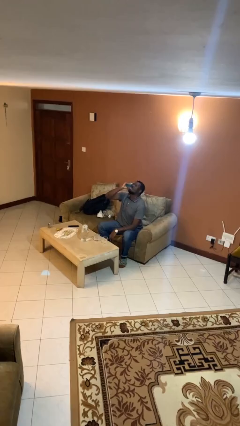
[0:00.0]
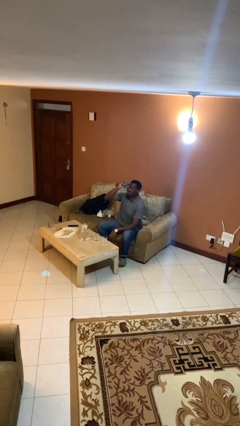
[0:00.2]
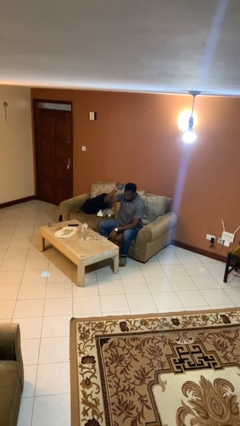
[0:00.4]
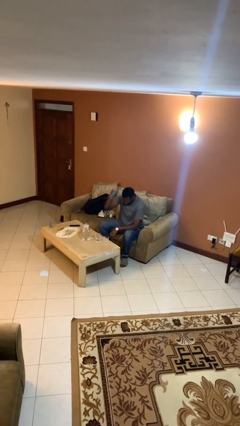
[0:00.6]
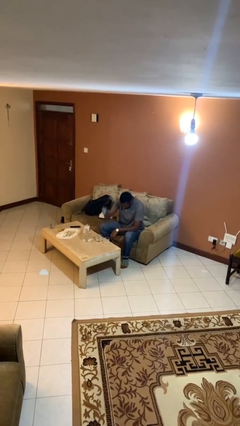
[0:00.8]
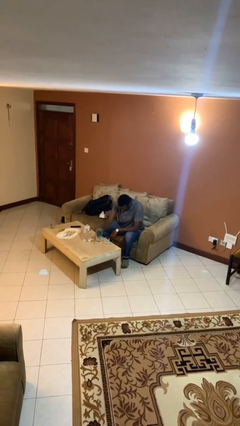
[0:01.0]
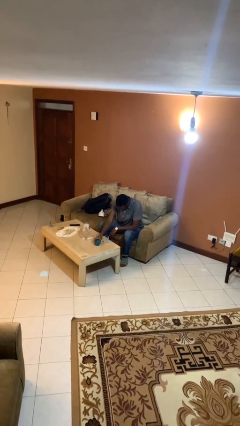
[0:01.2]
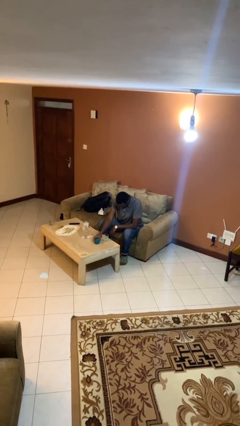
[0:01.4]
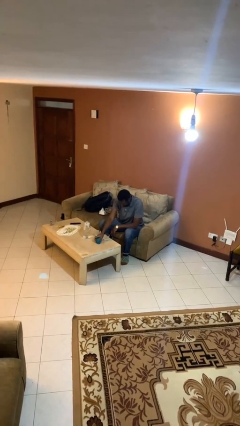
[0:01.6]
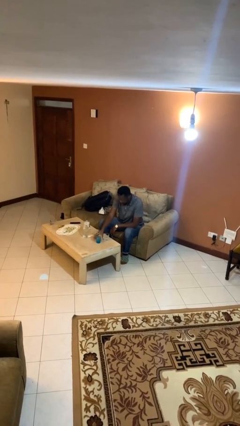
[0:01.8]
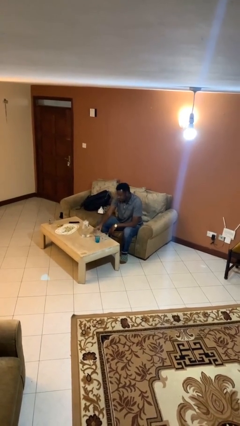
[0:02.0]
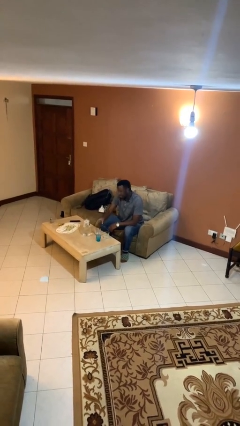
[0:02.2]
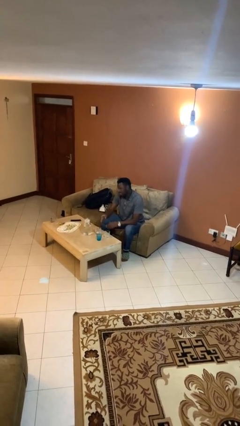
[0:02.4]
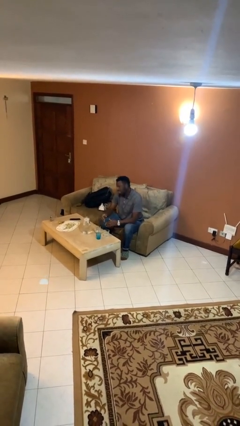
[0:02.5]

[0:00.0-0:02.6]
person puts down object on table

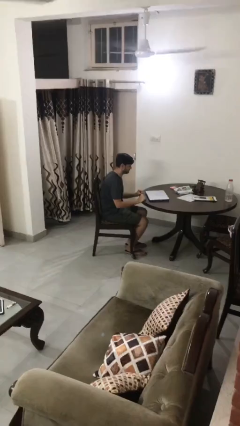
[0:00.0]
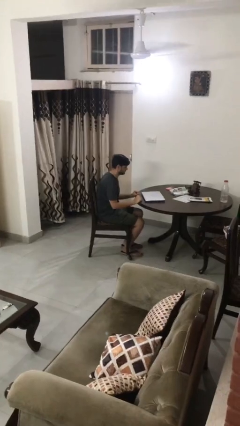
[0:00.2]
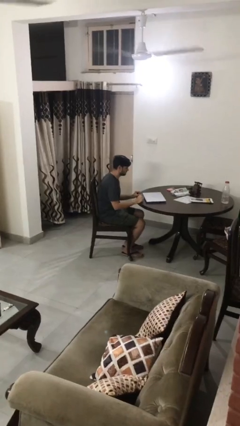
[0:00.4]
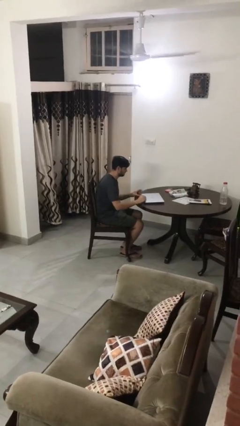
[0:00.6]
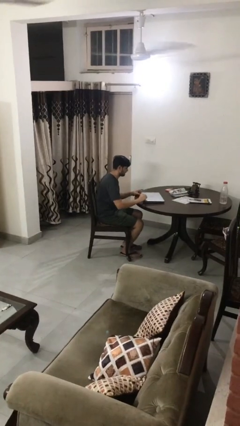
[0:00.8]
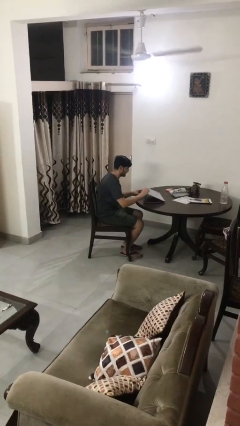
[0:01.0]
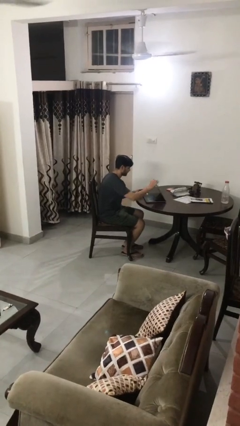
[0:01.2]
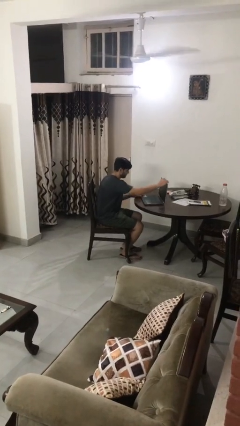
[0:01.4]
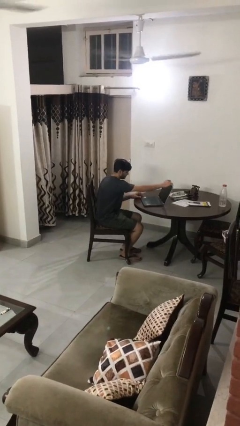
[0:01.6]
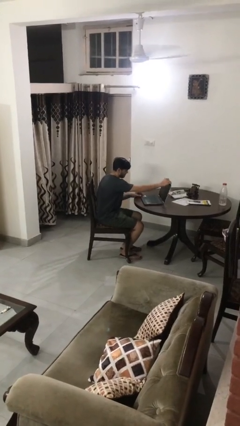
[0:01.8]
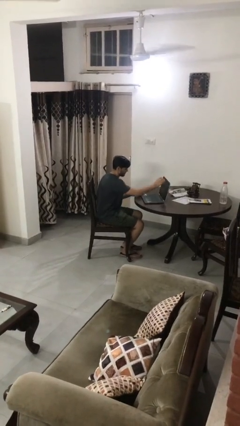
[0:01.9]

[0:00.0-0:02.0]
person opens laptop

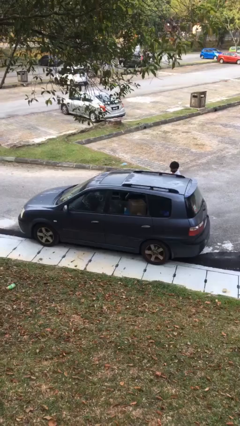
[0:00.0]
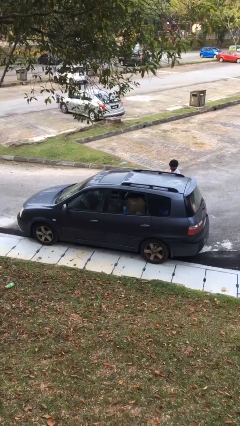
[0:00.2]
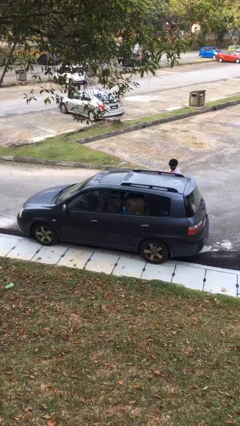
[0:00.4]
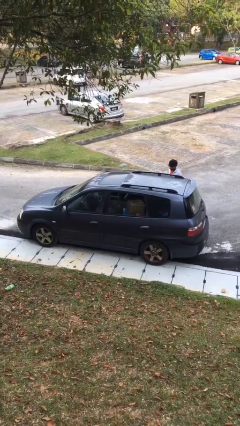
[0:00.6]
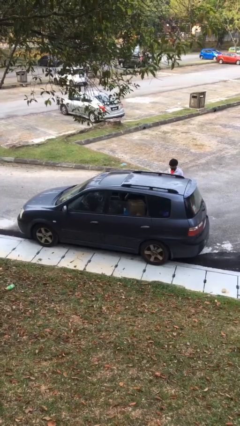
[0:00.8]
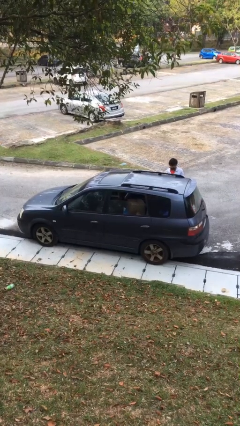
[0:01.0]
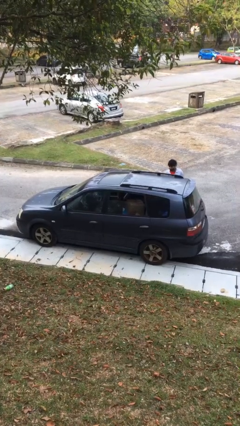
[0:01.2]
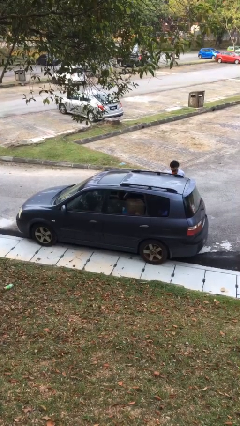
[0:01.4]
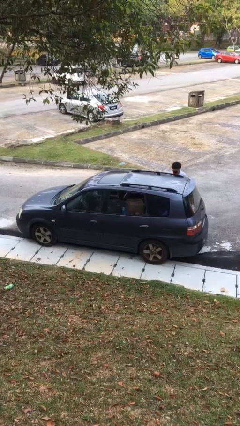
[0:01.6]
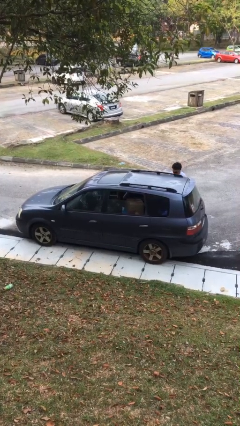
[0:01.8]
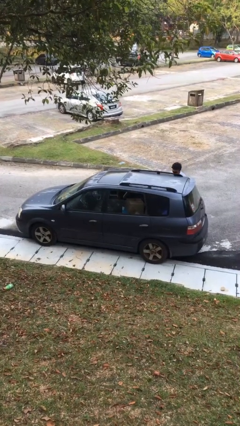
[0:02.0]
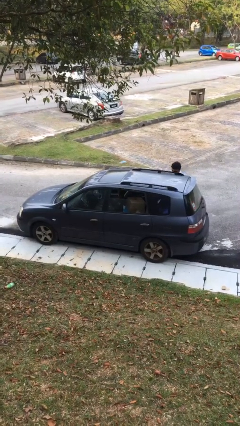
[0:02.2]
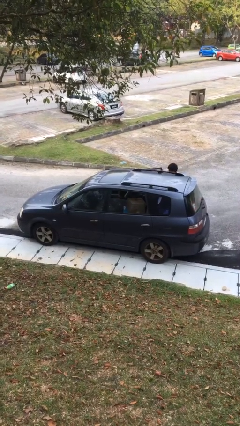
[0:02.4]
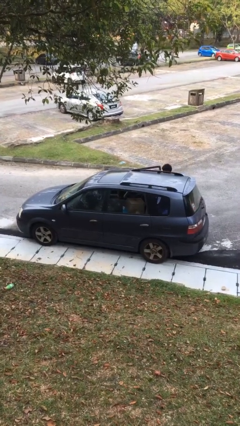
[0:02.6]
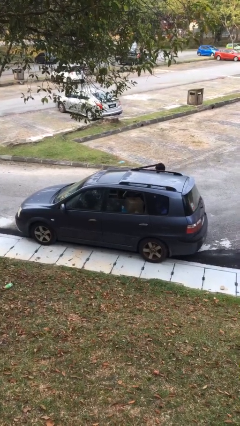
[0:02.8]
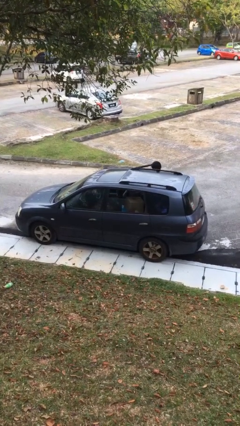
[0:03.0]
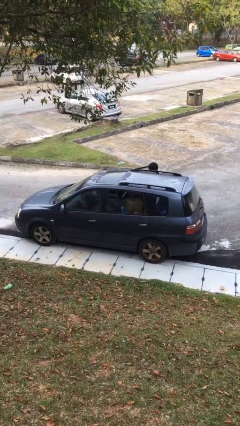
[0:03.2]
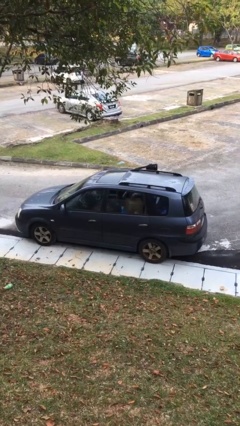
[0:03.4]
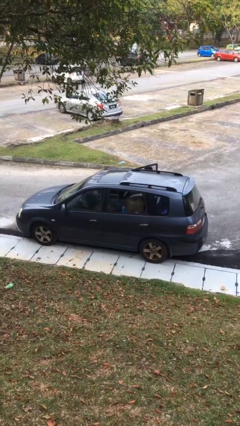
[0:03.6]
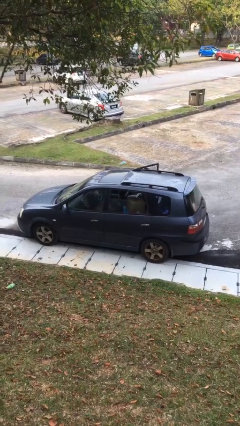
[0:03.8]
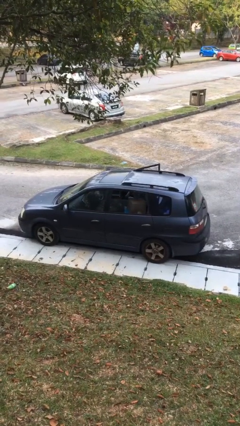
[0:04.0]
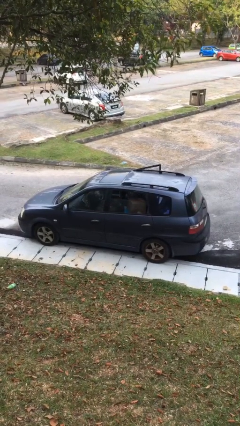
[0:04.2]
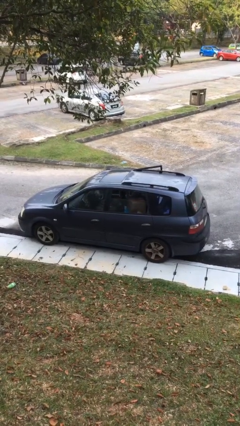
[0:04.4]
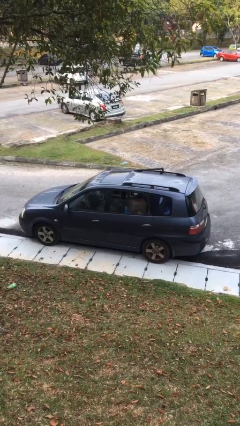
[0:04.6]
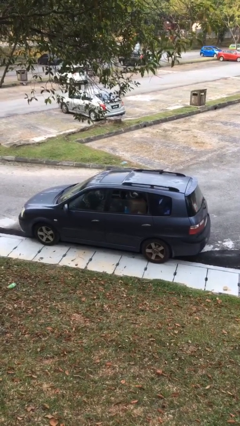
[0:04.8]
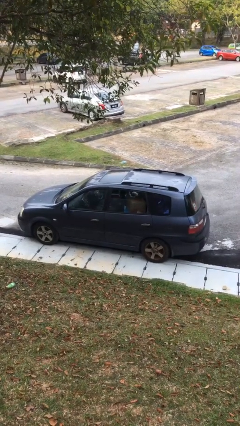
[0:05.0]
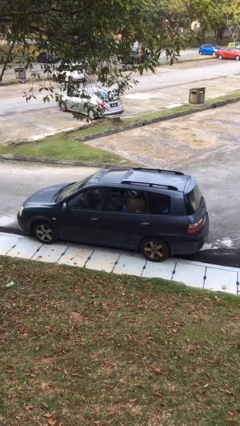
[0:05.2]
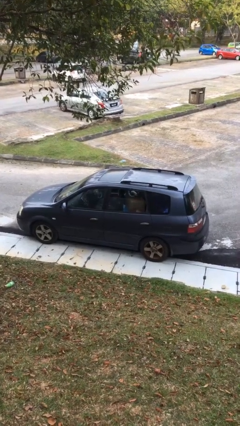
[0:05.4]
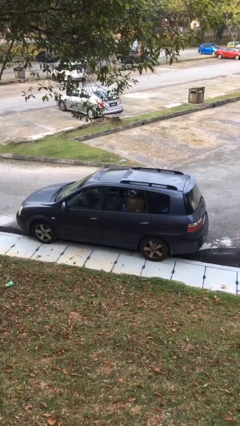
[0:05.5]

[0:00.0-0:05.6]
car picks up person

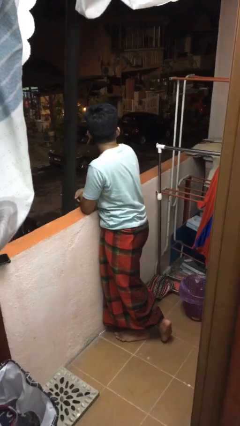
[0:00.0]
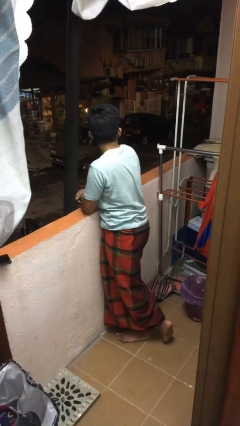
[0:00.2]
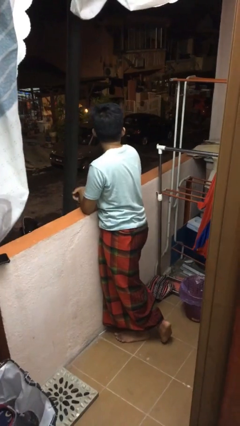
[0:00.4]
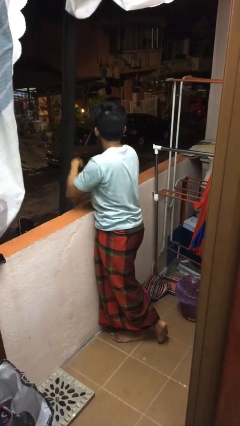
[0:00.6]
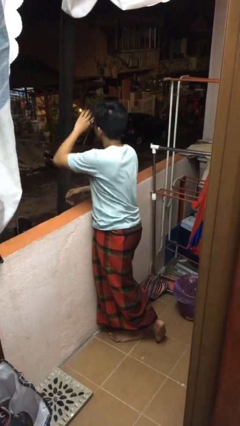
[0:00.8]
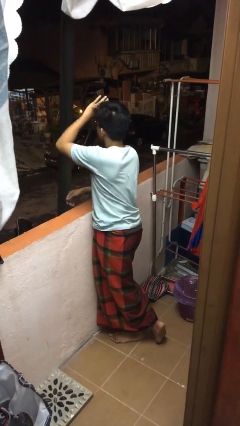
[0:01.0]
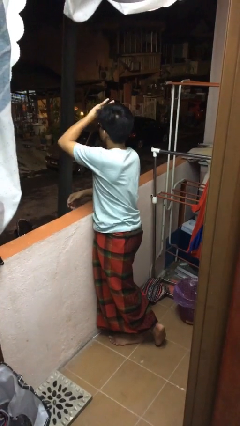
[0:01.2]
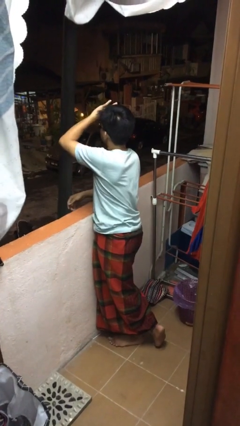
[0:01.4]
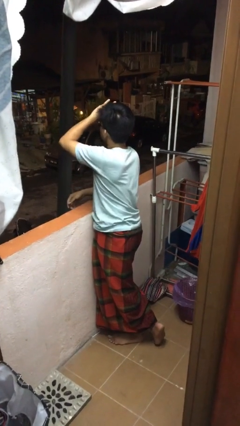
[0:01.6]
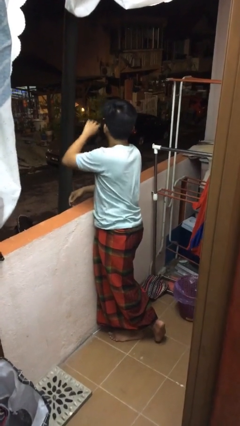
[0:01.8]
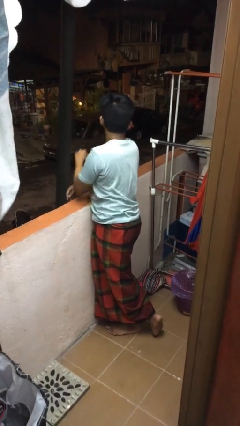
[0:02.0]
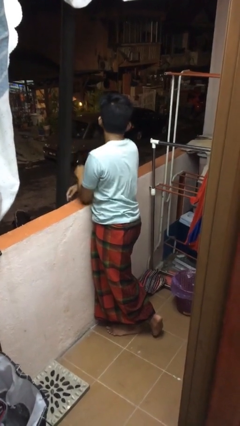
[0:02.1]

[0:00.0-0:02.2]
person shades eyes

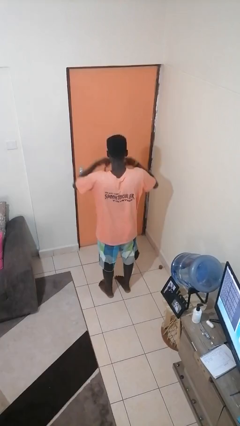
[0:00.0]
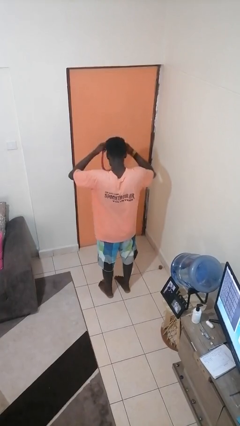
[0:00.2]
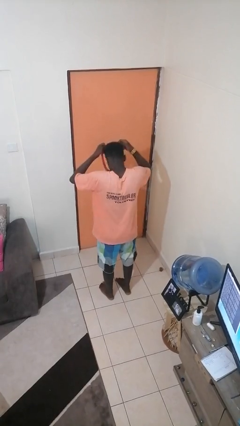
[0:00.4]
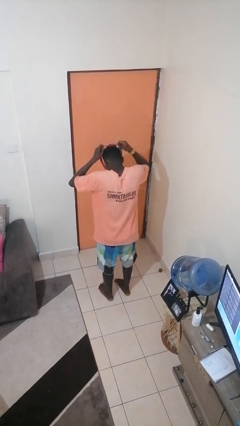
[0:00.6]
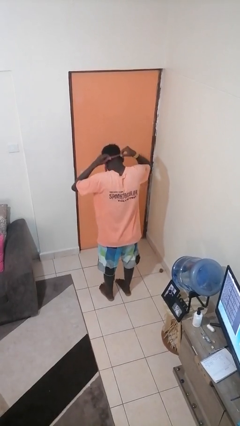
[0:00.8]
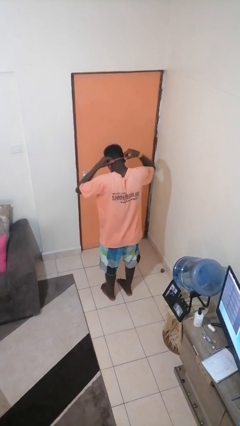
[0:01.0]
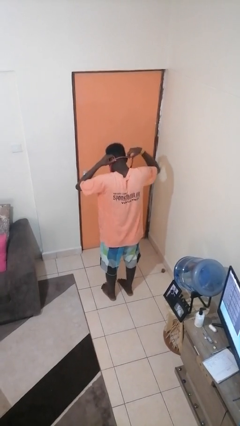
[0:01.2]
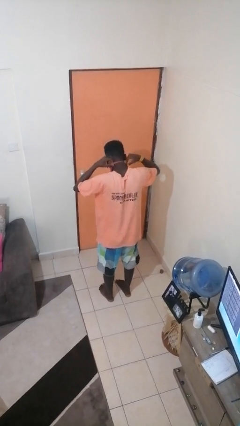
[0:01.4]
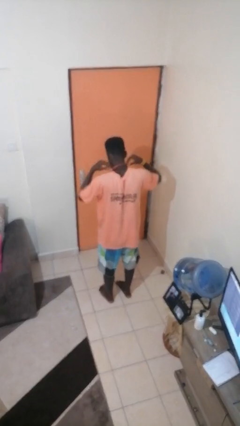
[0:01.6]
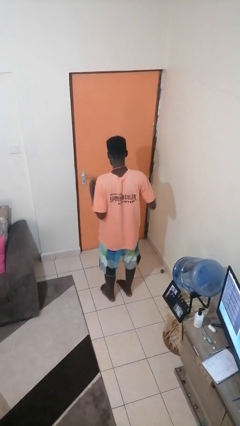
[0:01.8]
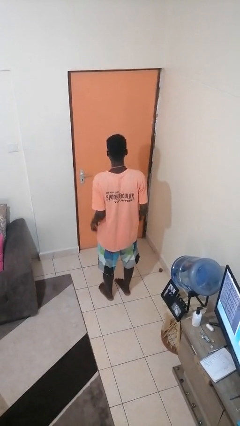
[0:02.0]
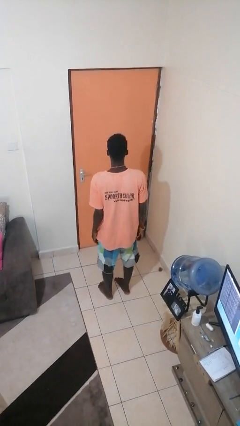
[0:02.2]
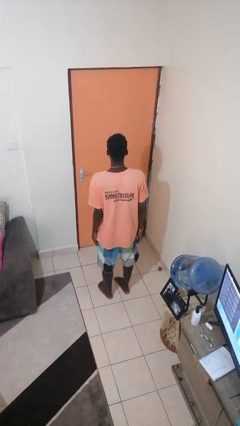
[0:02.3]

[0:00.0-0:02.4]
person puts on necklace

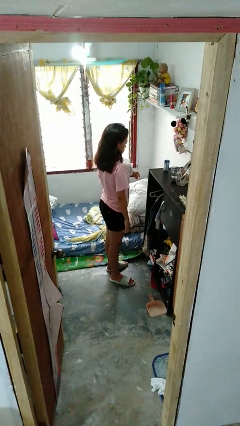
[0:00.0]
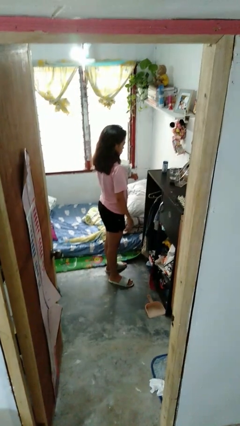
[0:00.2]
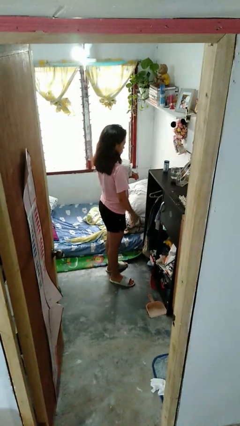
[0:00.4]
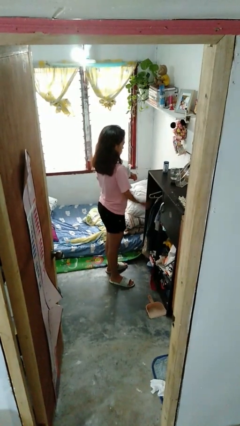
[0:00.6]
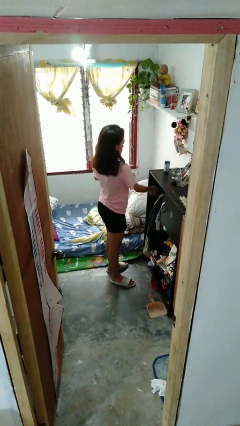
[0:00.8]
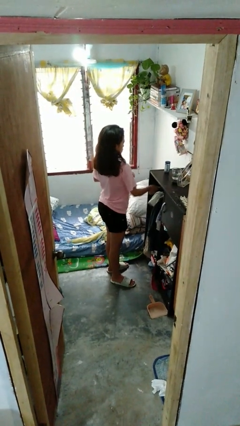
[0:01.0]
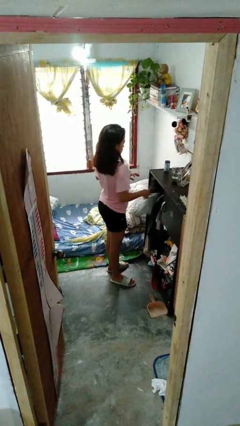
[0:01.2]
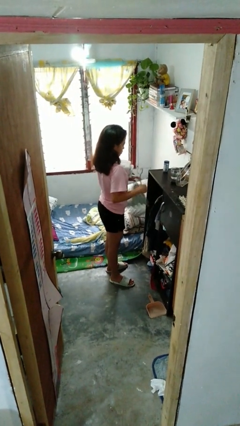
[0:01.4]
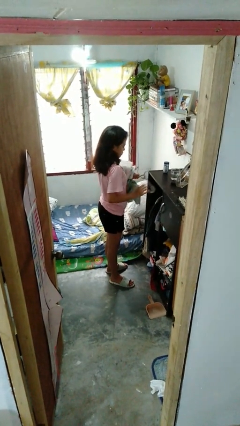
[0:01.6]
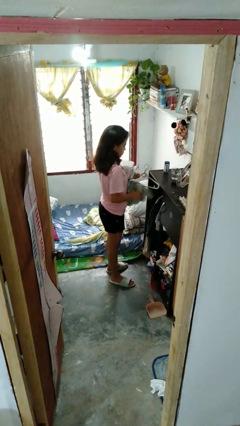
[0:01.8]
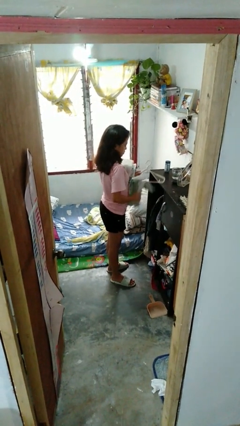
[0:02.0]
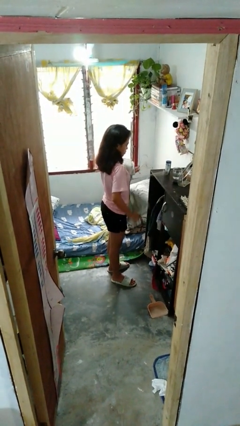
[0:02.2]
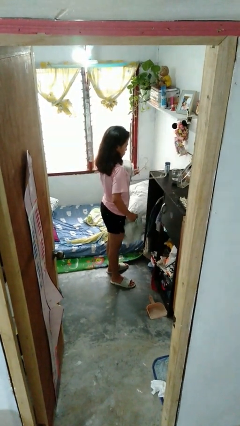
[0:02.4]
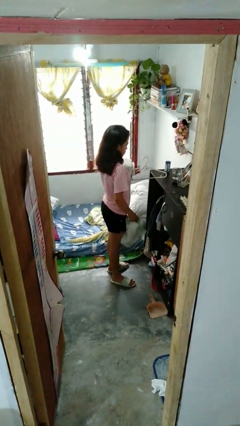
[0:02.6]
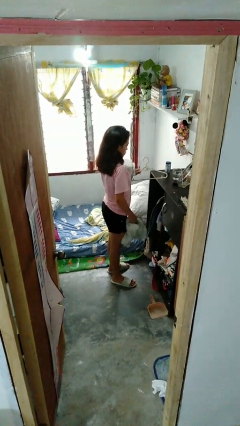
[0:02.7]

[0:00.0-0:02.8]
person takes clothes from closet
